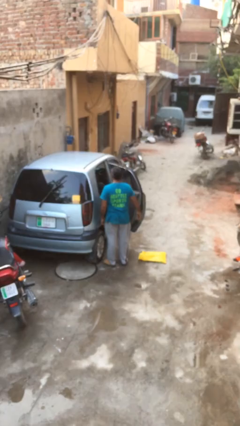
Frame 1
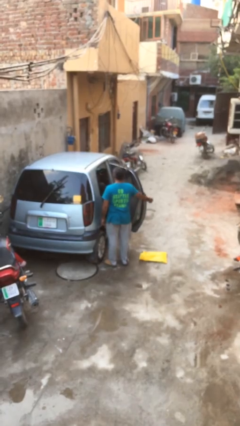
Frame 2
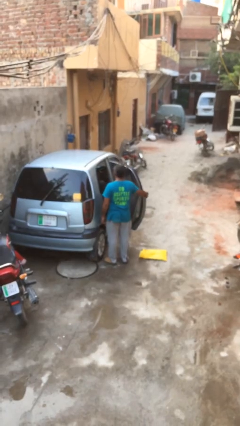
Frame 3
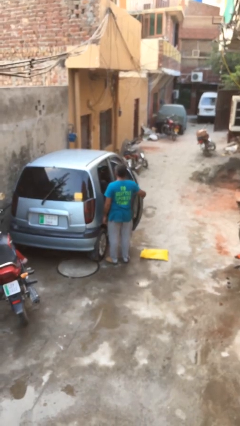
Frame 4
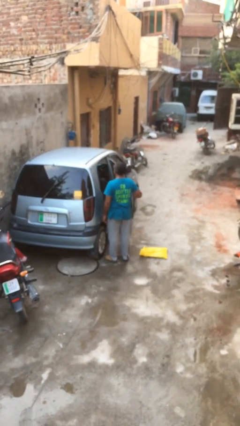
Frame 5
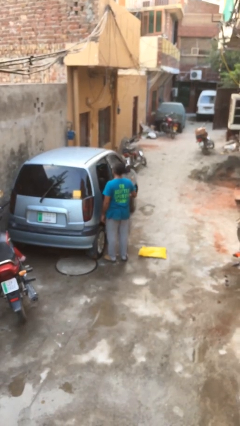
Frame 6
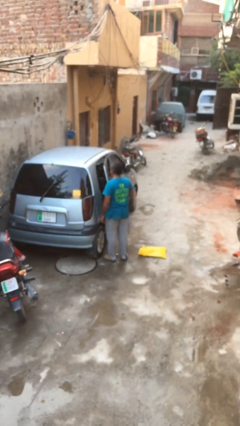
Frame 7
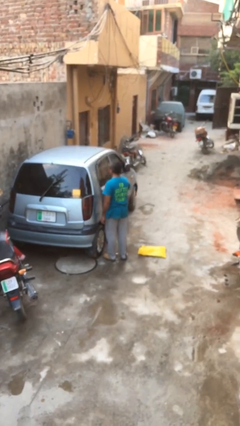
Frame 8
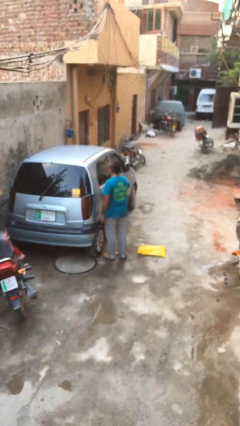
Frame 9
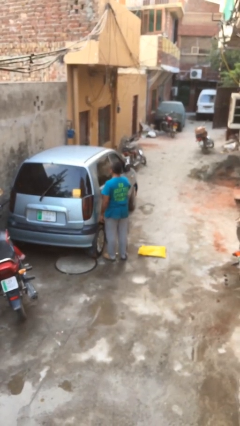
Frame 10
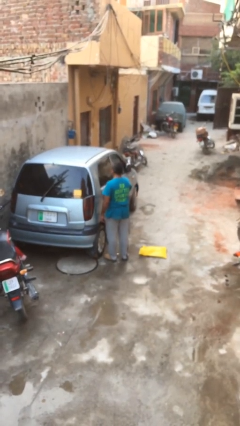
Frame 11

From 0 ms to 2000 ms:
person closes car door

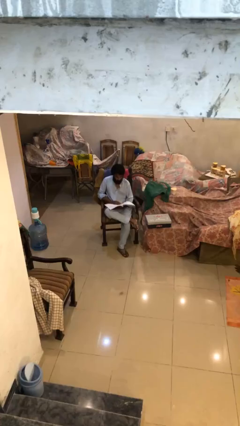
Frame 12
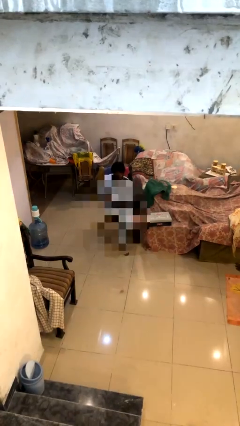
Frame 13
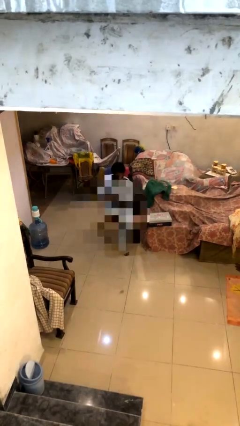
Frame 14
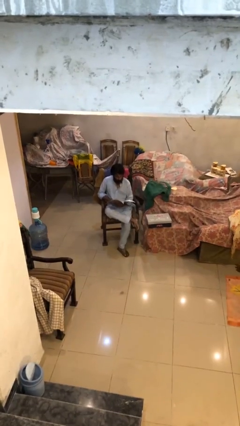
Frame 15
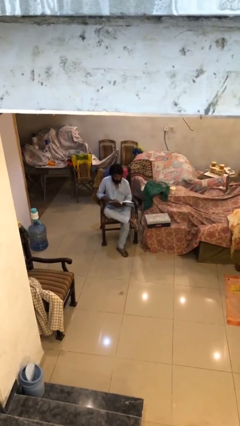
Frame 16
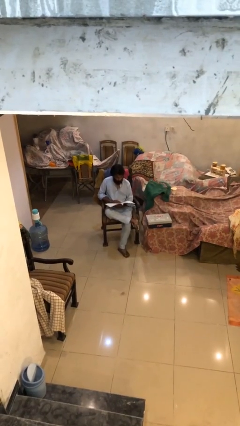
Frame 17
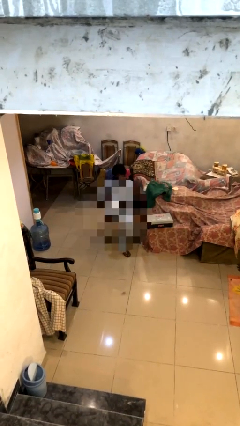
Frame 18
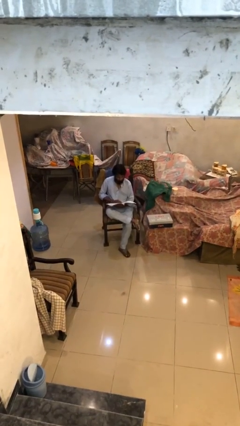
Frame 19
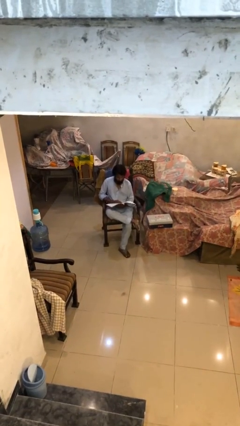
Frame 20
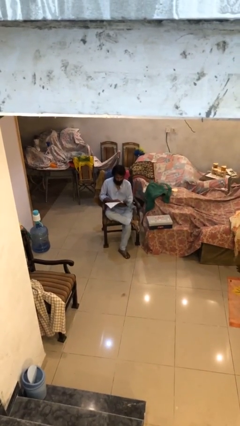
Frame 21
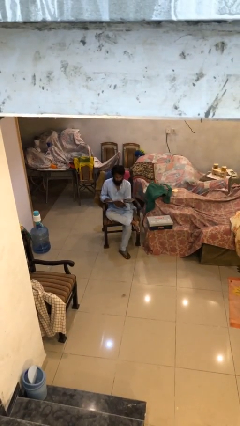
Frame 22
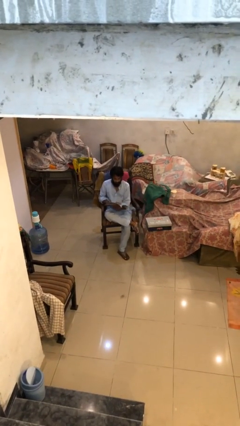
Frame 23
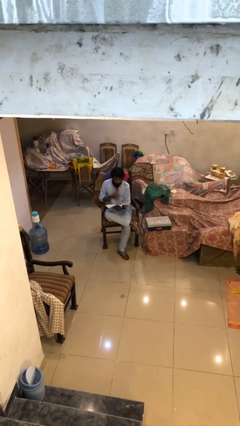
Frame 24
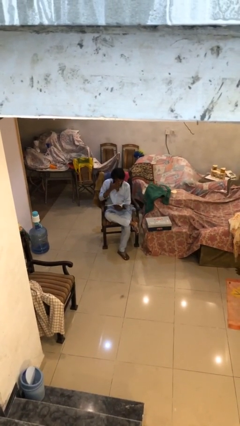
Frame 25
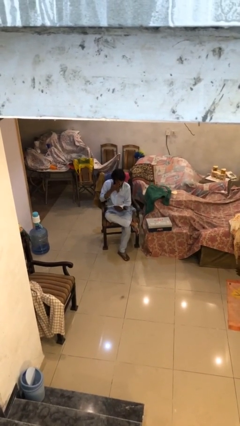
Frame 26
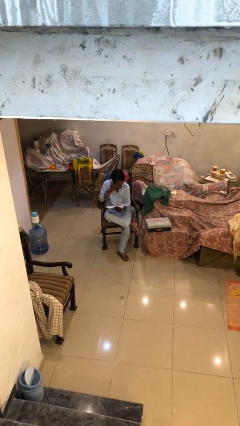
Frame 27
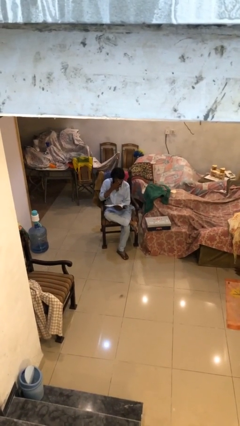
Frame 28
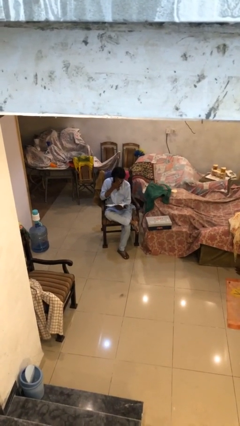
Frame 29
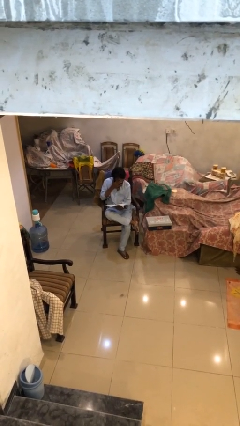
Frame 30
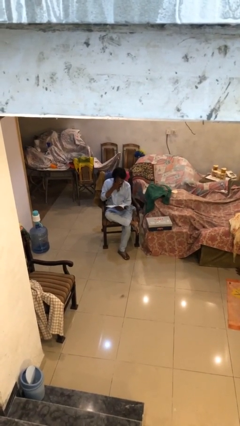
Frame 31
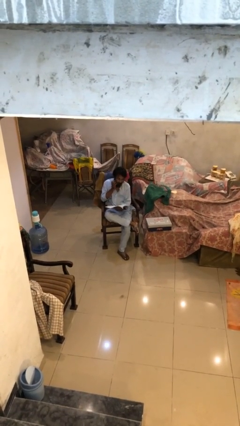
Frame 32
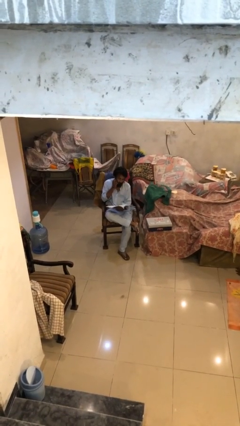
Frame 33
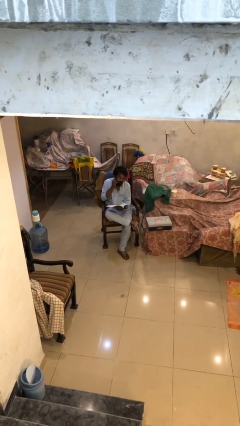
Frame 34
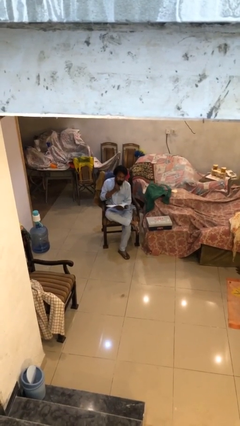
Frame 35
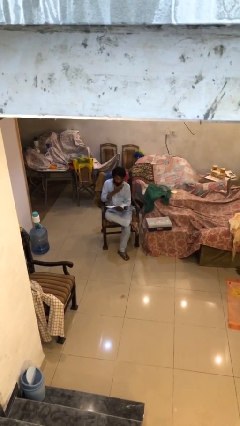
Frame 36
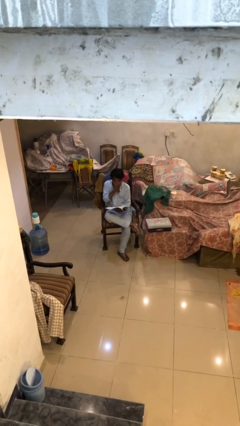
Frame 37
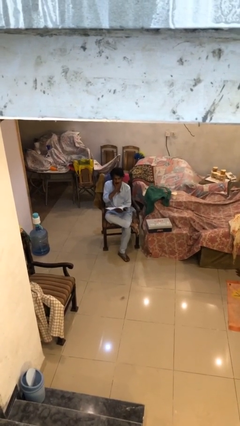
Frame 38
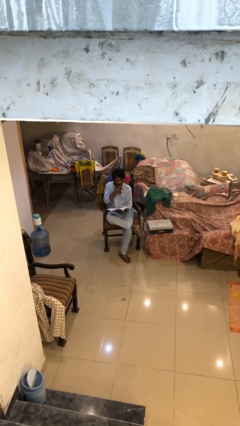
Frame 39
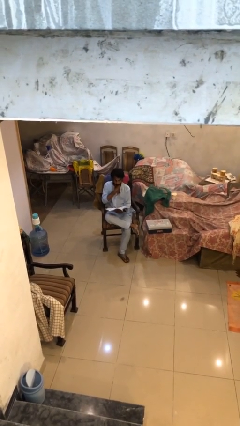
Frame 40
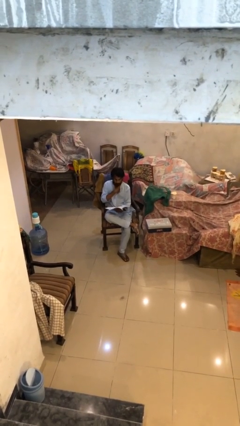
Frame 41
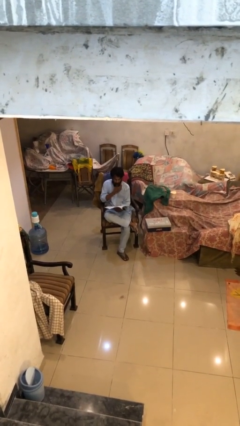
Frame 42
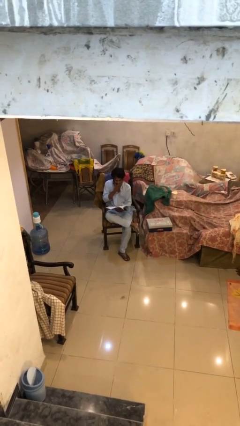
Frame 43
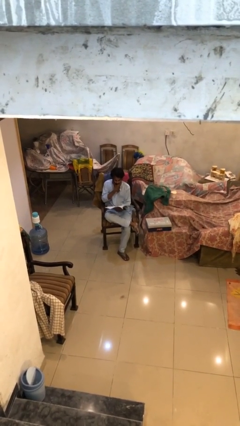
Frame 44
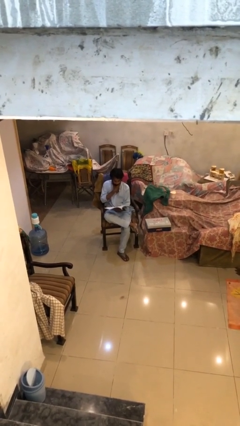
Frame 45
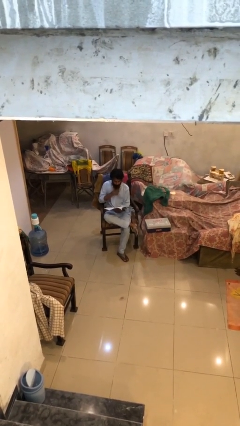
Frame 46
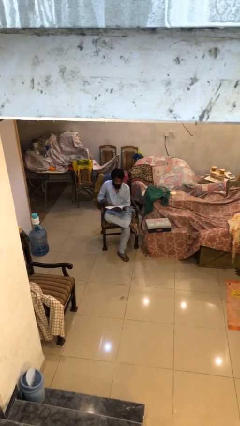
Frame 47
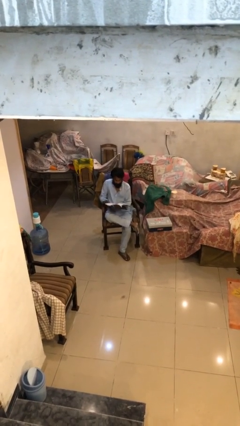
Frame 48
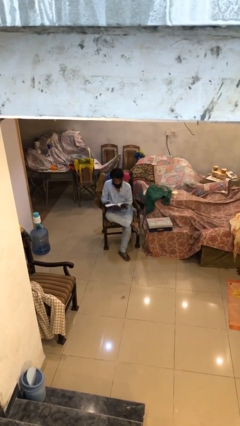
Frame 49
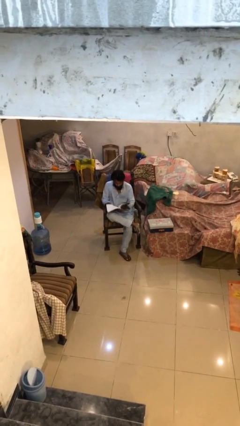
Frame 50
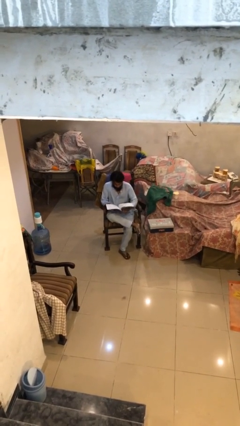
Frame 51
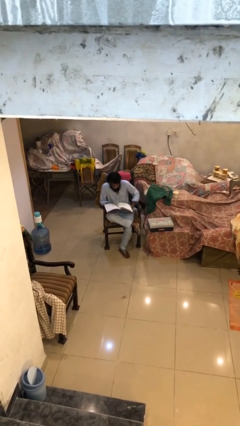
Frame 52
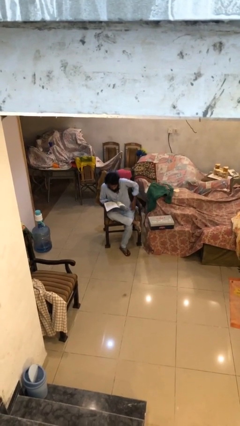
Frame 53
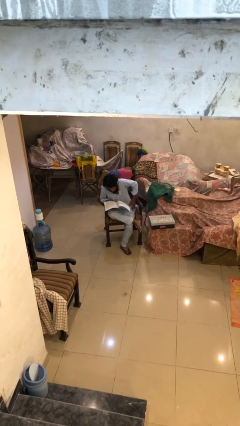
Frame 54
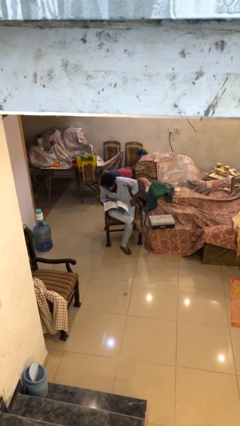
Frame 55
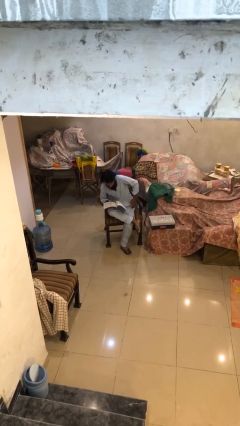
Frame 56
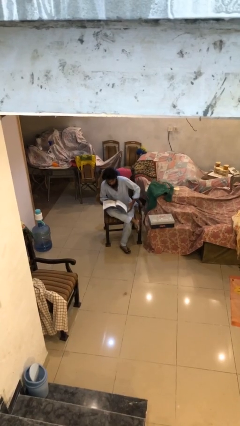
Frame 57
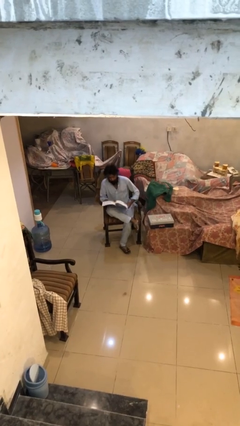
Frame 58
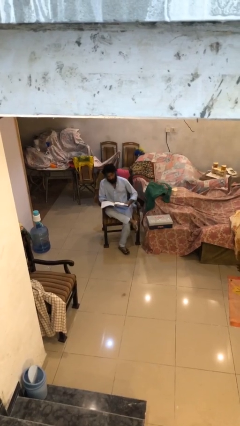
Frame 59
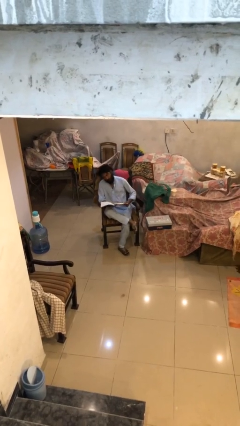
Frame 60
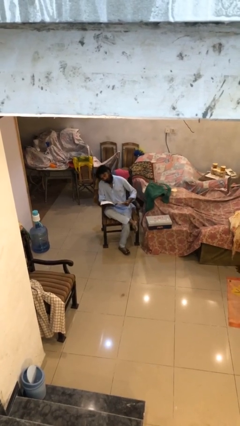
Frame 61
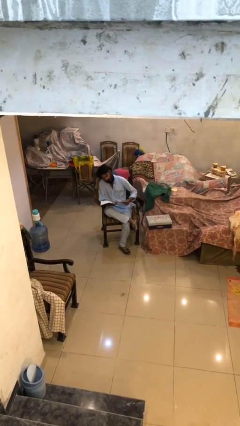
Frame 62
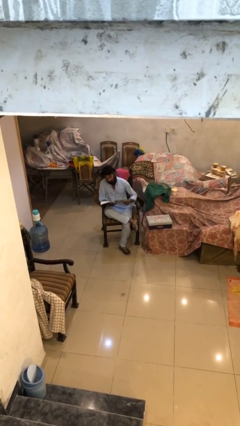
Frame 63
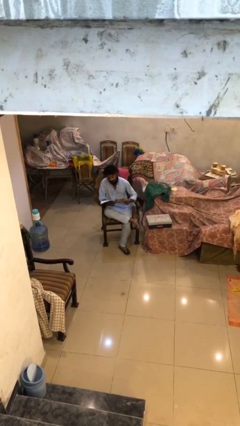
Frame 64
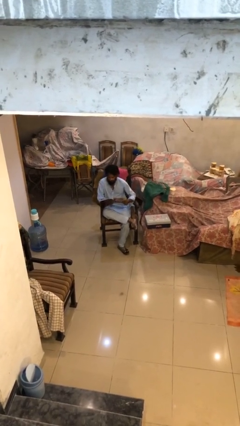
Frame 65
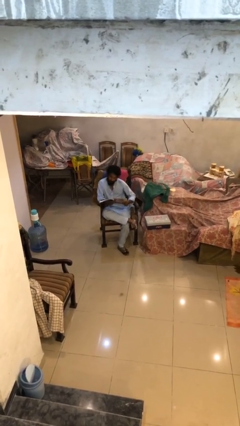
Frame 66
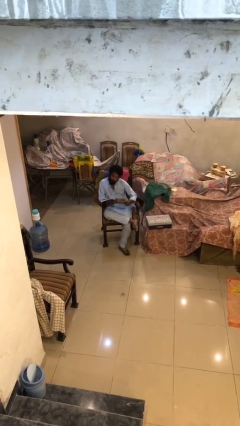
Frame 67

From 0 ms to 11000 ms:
person reads document

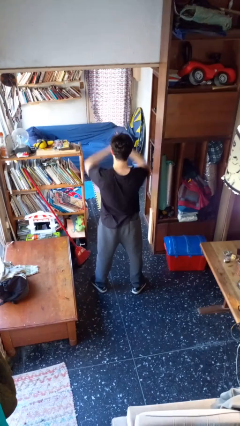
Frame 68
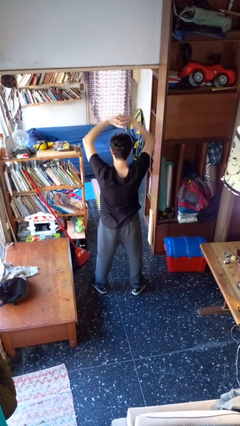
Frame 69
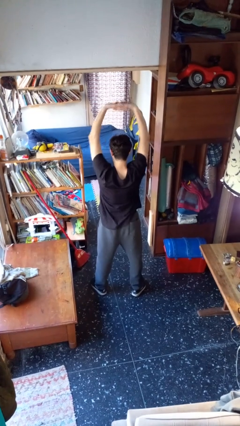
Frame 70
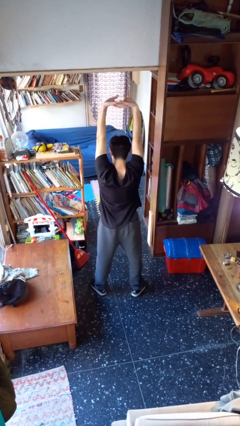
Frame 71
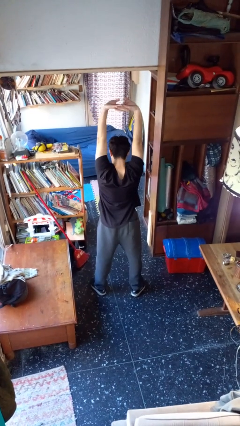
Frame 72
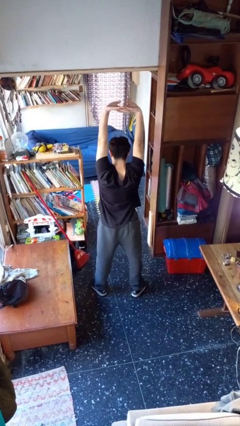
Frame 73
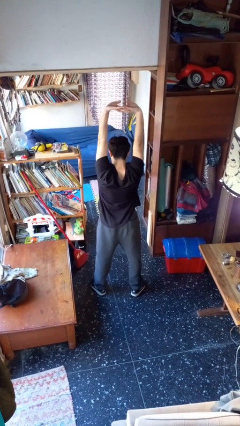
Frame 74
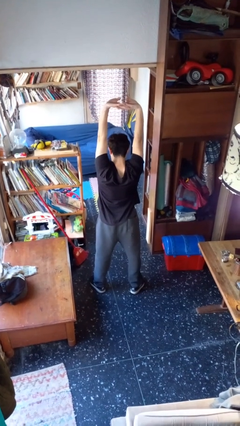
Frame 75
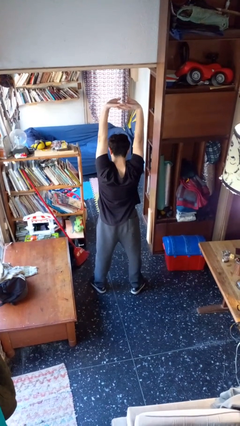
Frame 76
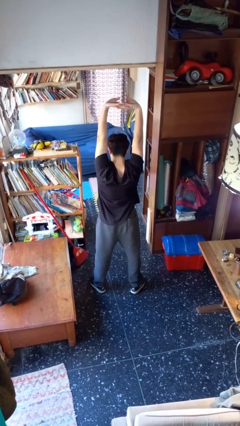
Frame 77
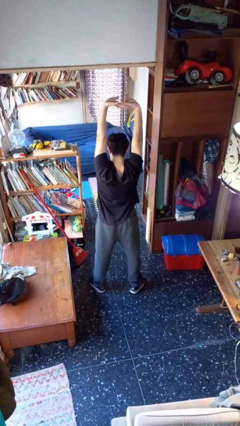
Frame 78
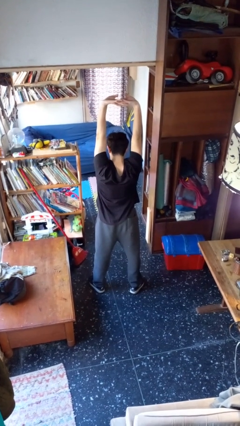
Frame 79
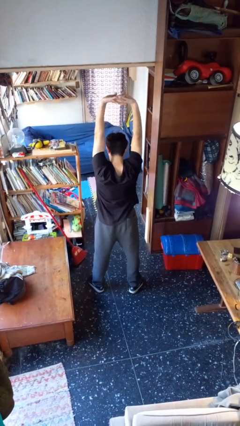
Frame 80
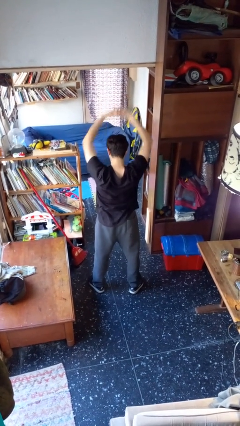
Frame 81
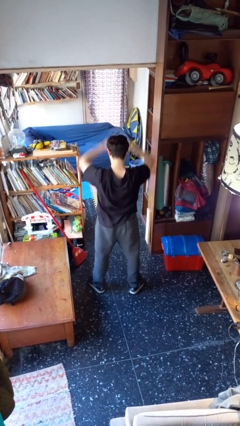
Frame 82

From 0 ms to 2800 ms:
person stretches arms over head

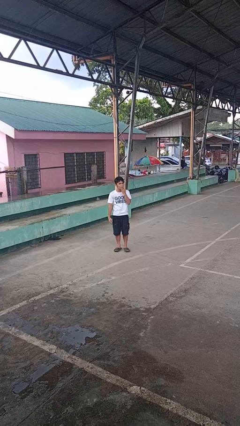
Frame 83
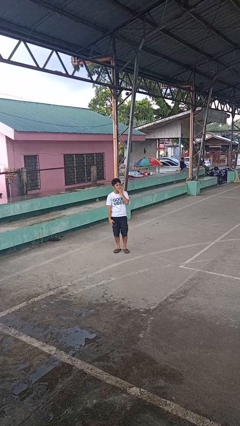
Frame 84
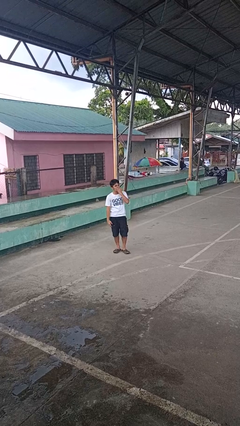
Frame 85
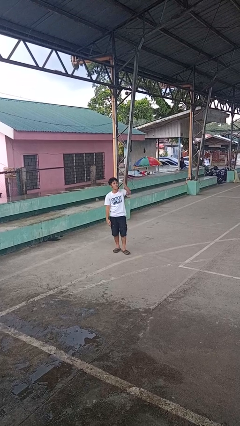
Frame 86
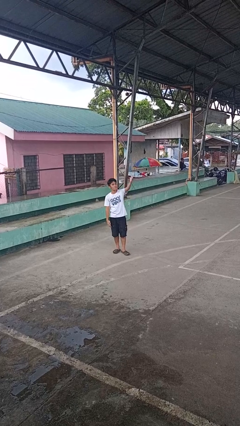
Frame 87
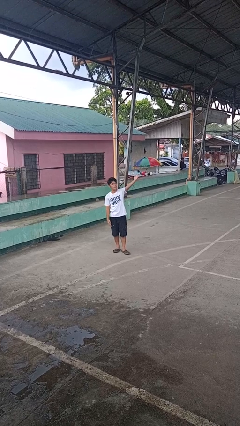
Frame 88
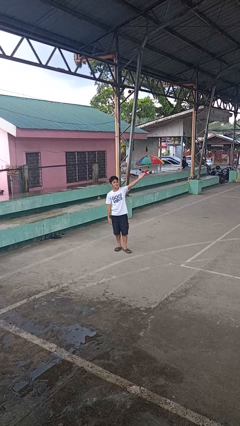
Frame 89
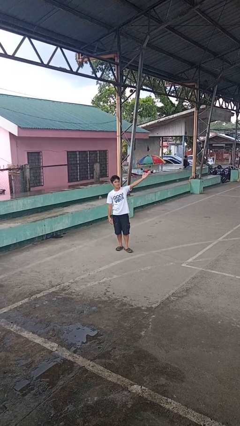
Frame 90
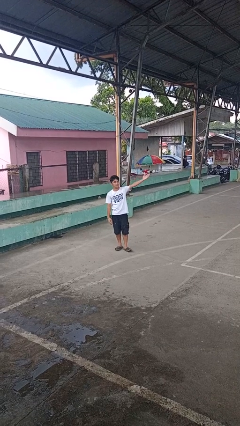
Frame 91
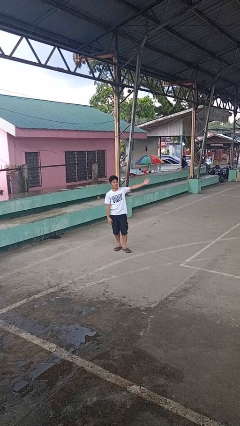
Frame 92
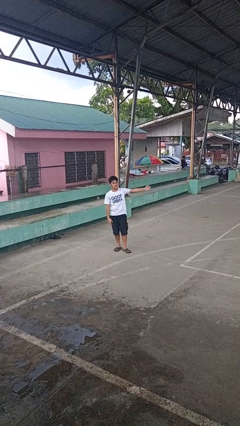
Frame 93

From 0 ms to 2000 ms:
person gestures blow kiss
